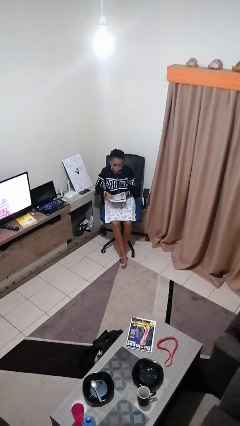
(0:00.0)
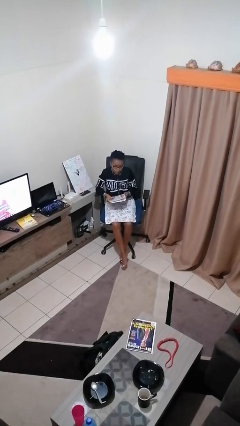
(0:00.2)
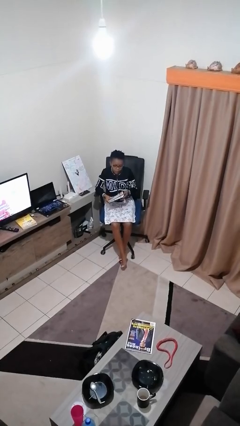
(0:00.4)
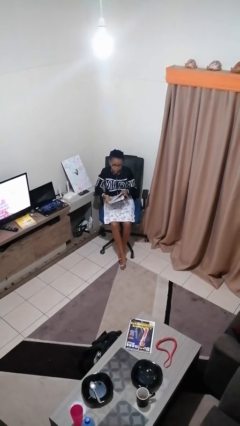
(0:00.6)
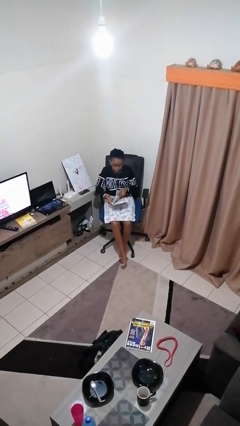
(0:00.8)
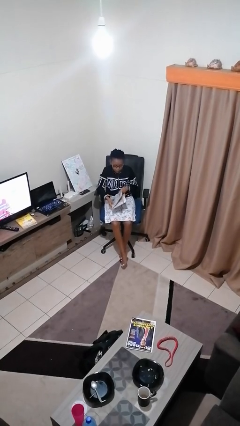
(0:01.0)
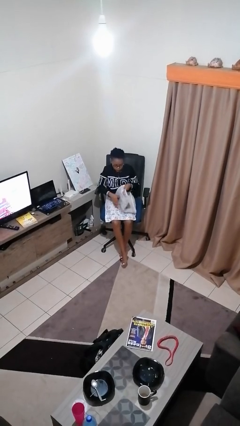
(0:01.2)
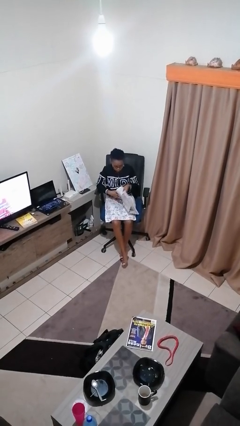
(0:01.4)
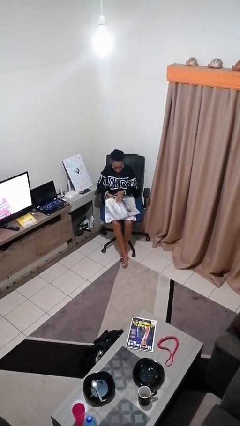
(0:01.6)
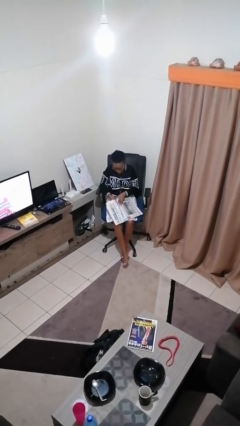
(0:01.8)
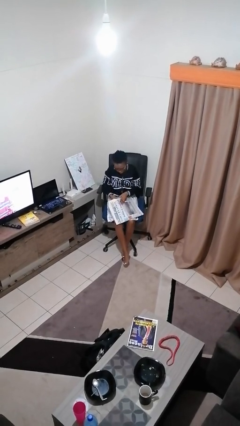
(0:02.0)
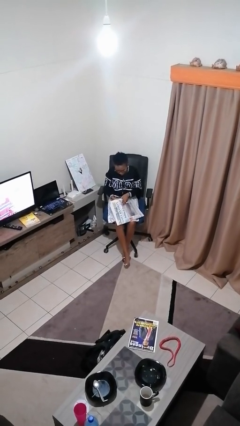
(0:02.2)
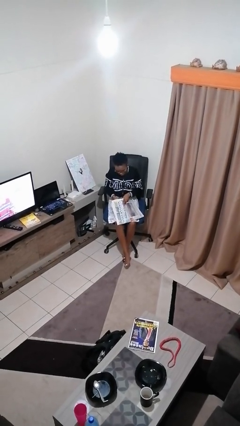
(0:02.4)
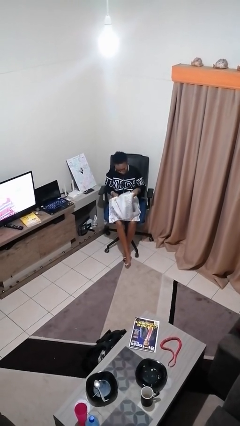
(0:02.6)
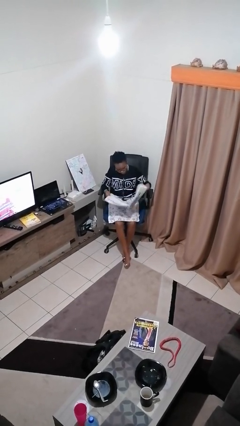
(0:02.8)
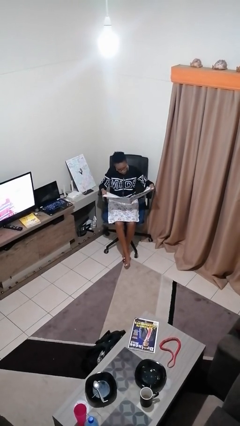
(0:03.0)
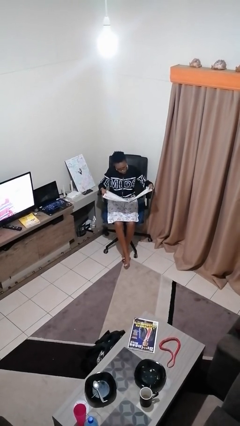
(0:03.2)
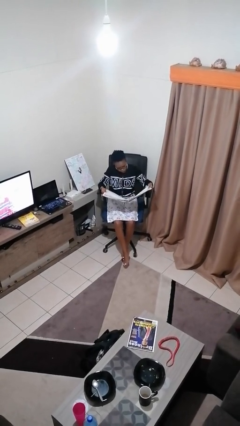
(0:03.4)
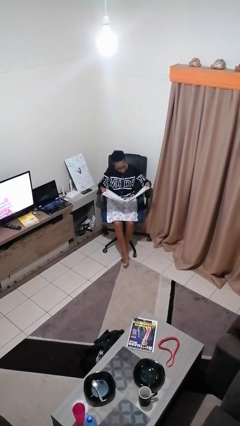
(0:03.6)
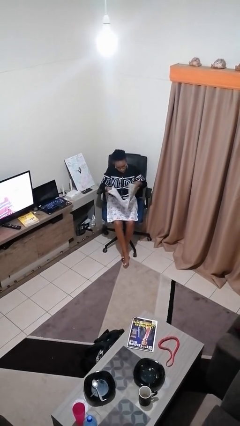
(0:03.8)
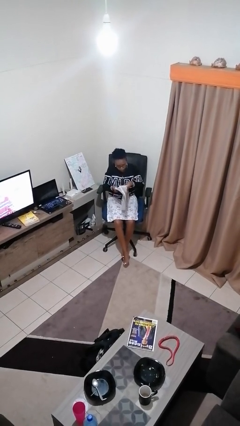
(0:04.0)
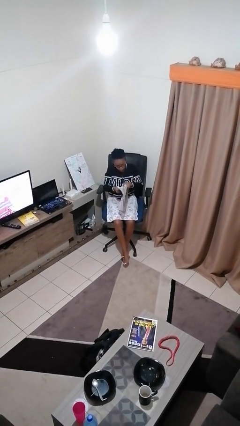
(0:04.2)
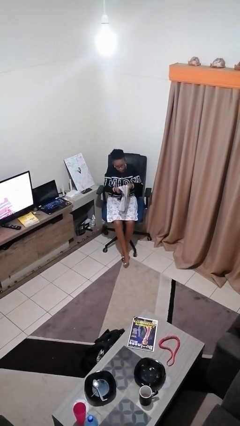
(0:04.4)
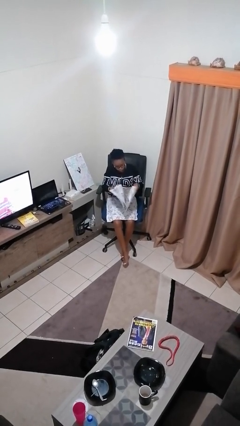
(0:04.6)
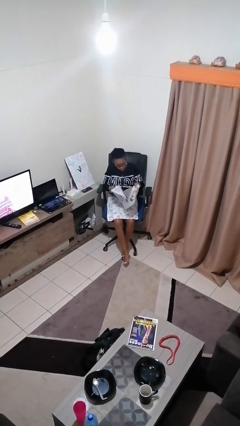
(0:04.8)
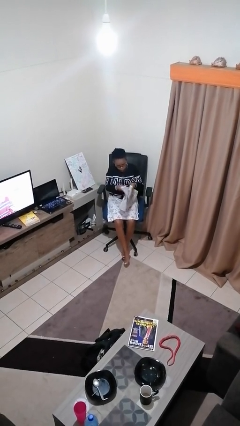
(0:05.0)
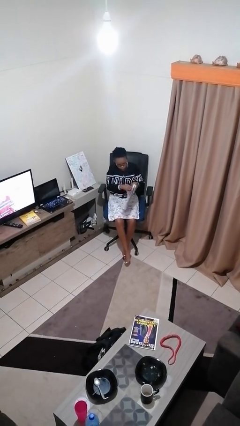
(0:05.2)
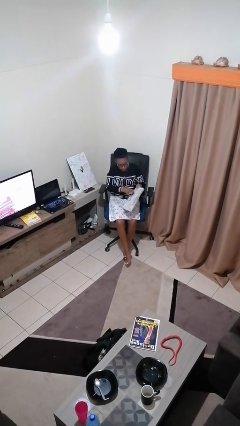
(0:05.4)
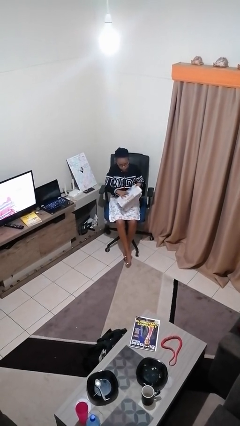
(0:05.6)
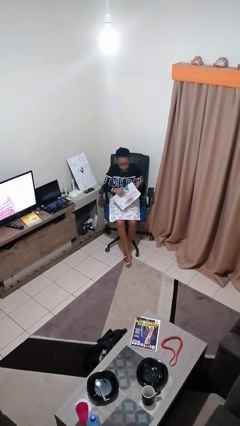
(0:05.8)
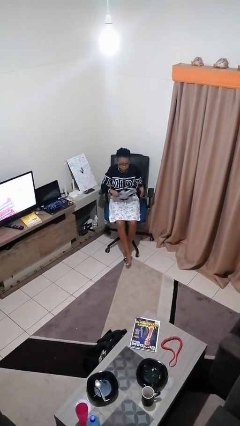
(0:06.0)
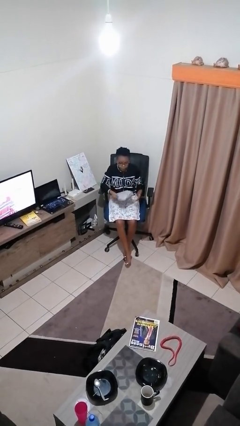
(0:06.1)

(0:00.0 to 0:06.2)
person reads newspaper

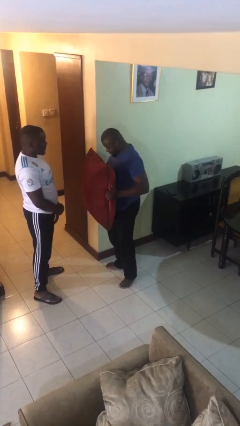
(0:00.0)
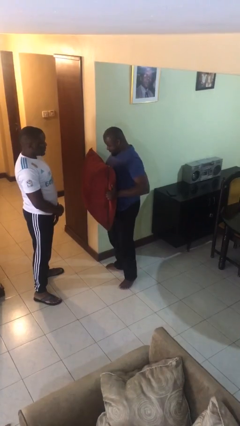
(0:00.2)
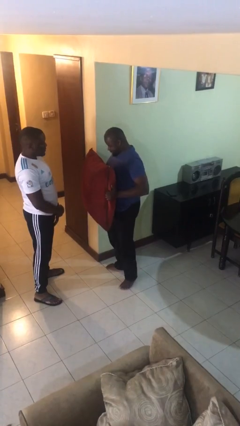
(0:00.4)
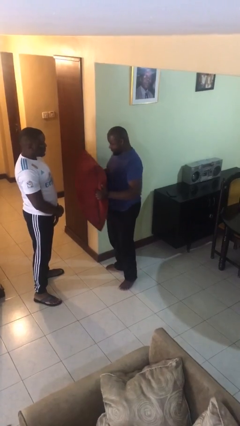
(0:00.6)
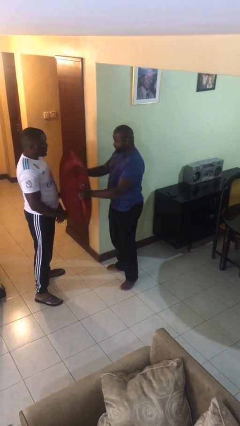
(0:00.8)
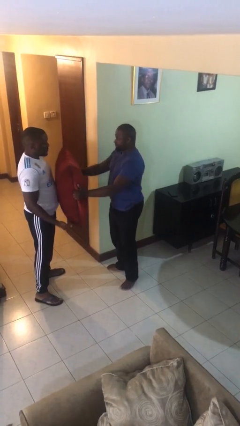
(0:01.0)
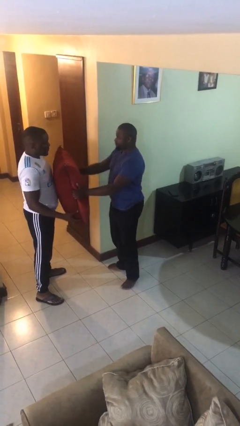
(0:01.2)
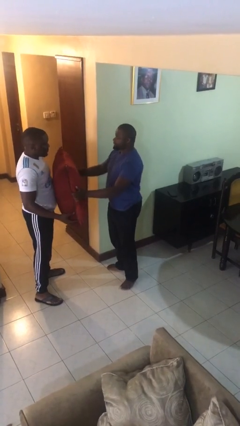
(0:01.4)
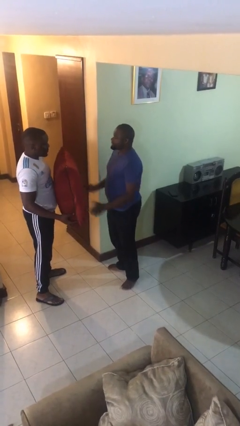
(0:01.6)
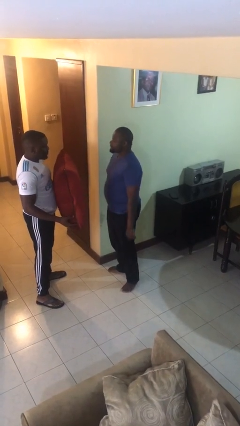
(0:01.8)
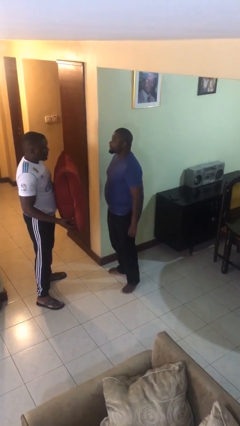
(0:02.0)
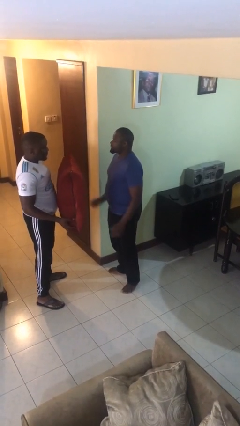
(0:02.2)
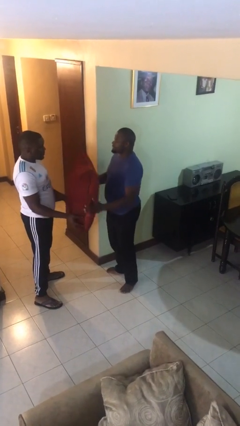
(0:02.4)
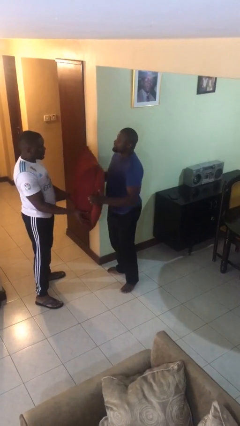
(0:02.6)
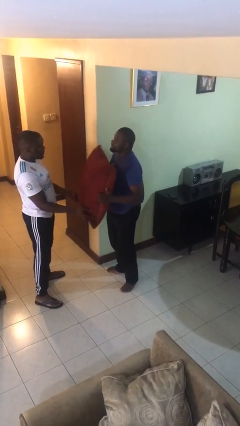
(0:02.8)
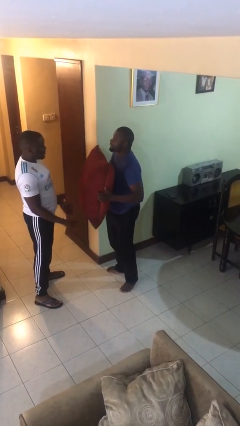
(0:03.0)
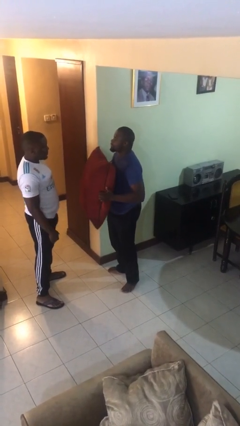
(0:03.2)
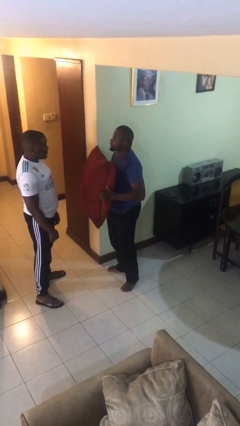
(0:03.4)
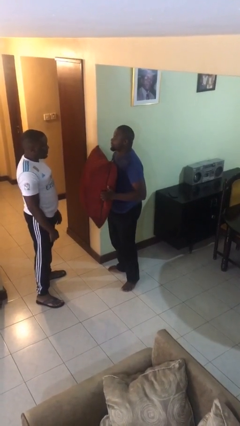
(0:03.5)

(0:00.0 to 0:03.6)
person transfers object to person

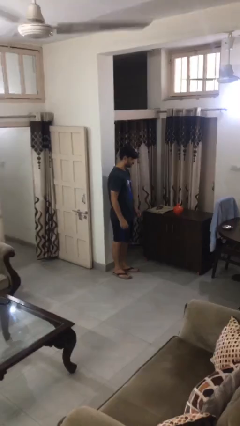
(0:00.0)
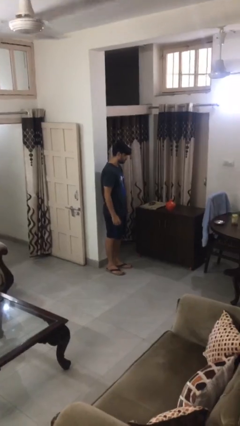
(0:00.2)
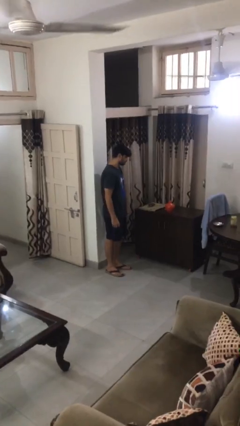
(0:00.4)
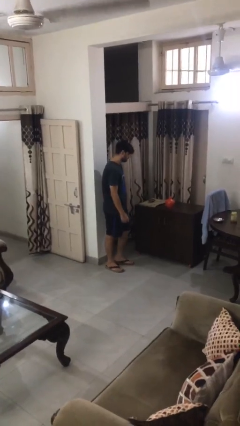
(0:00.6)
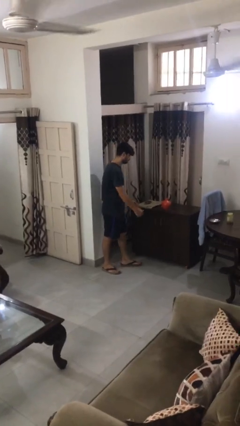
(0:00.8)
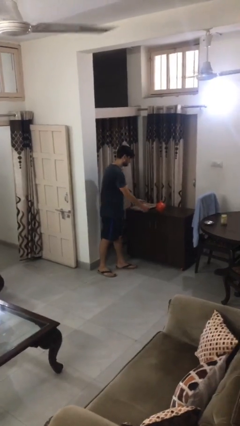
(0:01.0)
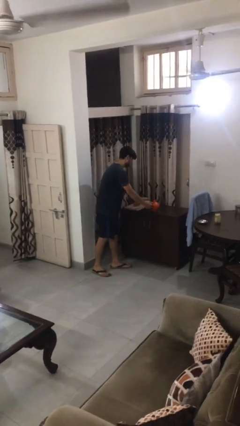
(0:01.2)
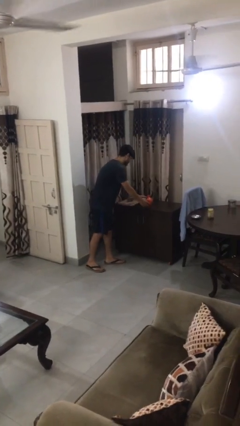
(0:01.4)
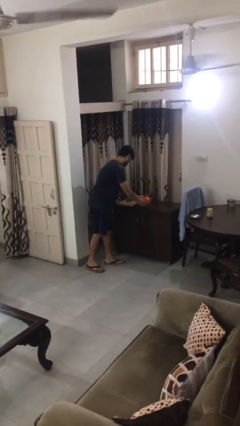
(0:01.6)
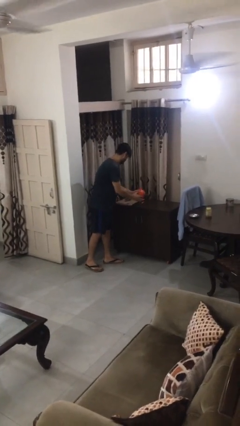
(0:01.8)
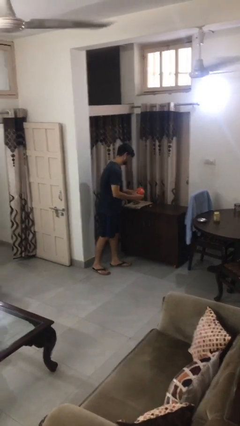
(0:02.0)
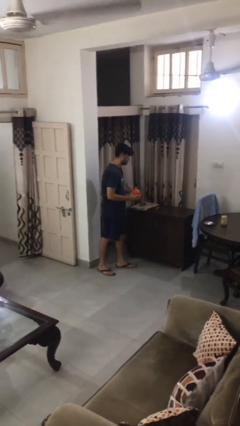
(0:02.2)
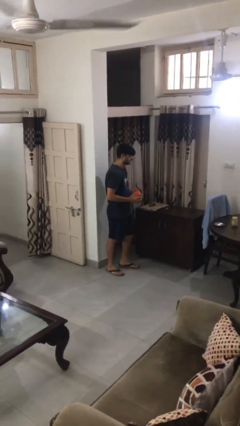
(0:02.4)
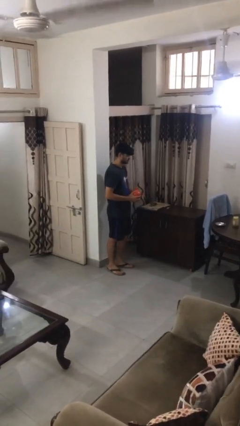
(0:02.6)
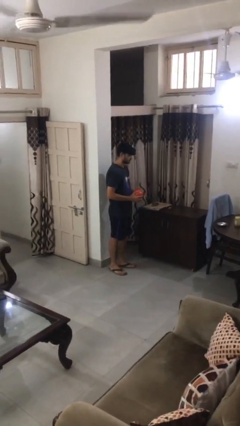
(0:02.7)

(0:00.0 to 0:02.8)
person picks up object from countertop

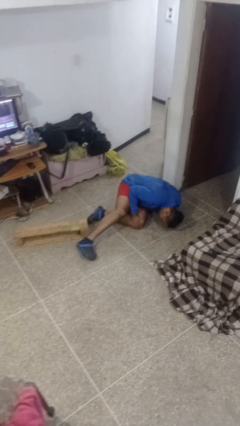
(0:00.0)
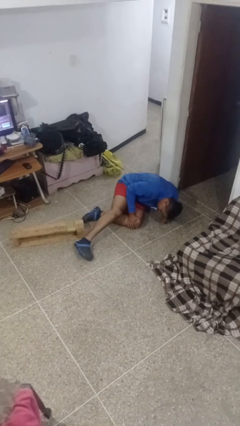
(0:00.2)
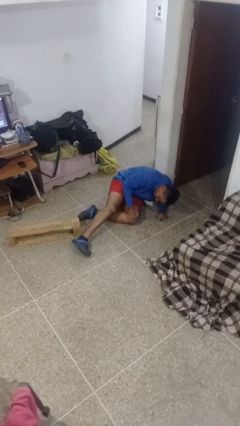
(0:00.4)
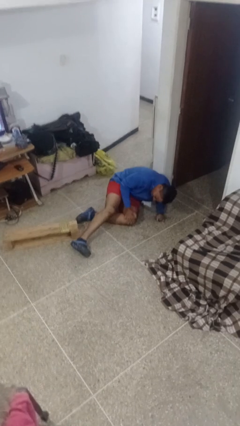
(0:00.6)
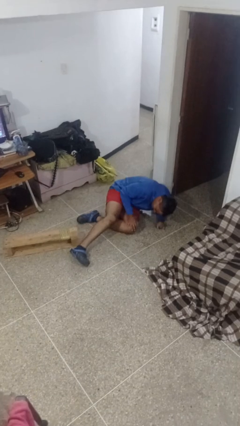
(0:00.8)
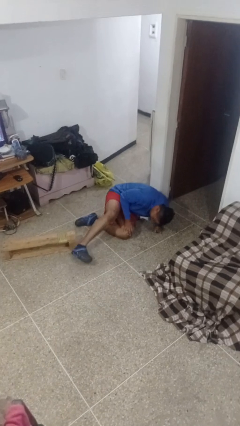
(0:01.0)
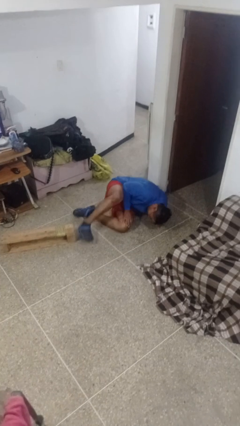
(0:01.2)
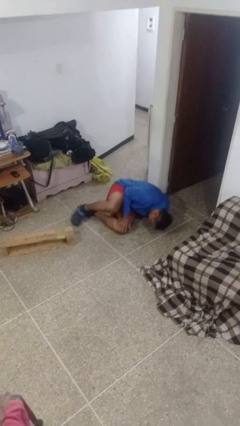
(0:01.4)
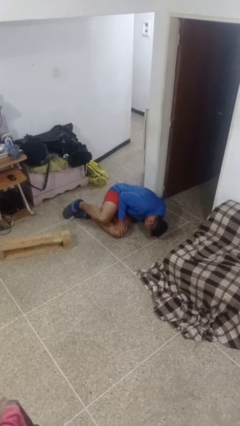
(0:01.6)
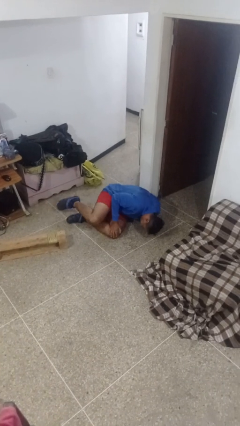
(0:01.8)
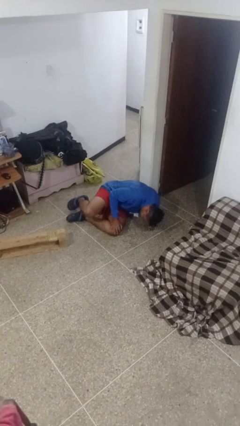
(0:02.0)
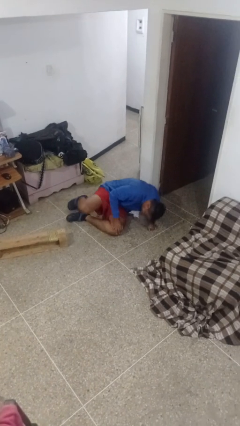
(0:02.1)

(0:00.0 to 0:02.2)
person lies down on floor

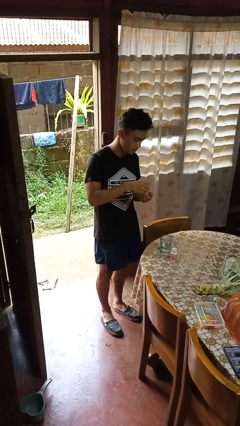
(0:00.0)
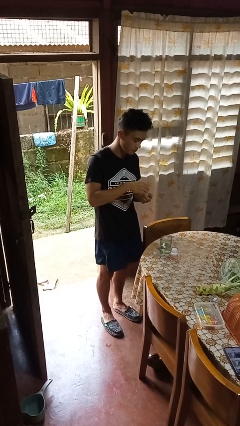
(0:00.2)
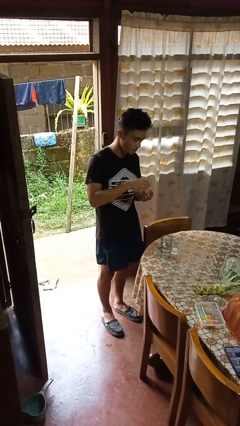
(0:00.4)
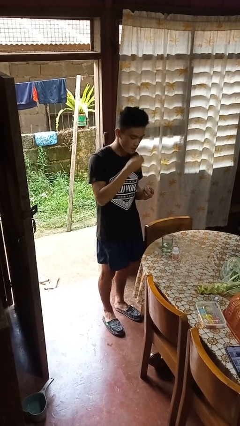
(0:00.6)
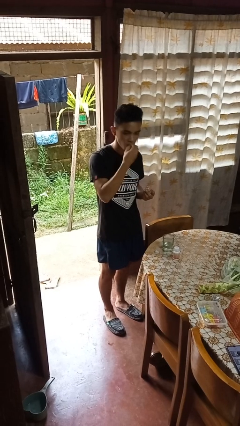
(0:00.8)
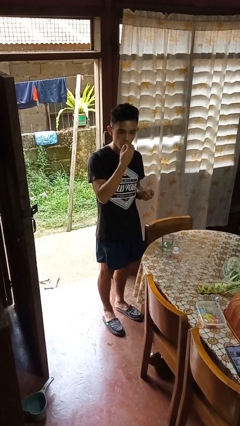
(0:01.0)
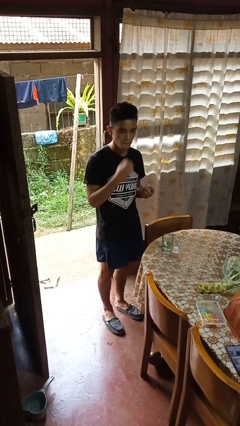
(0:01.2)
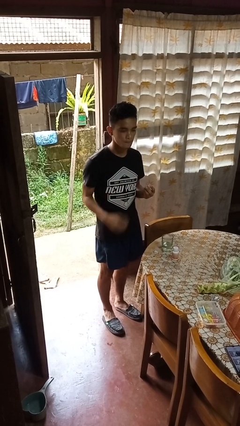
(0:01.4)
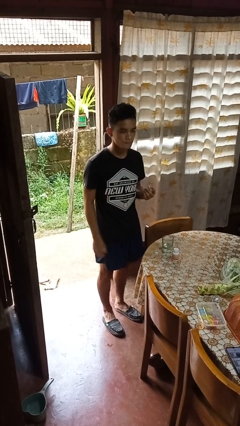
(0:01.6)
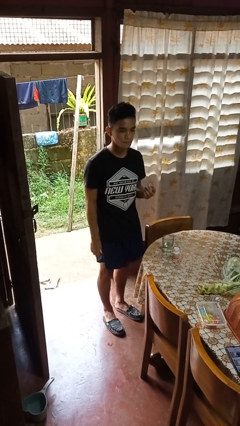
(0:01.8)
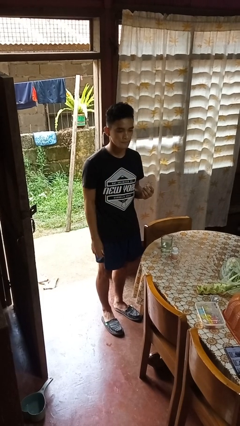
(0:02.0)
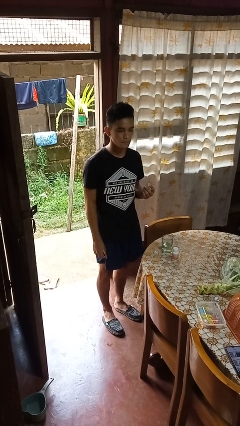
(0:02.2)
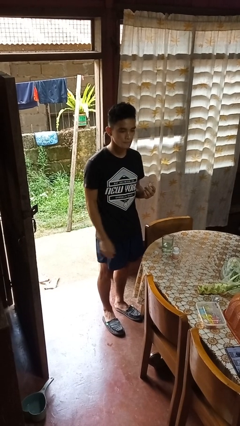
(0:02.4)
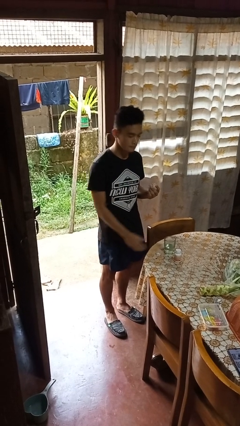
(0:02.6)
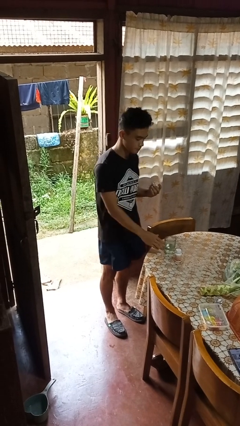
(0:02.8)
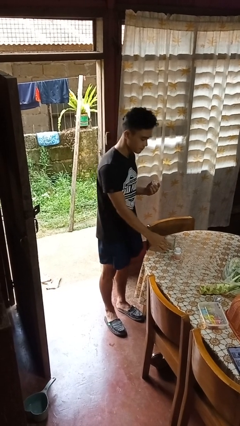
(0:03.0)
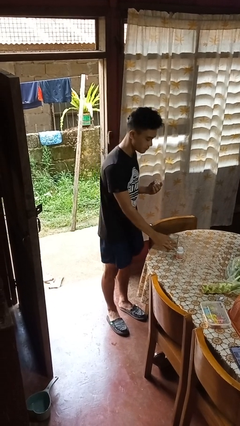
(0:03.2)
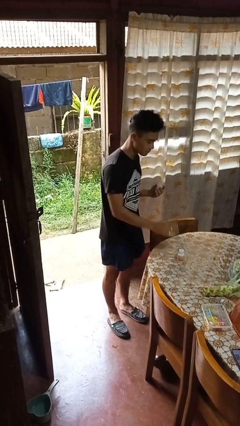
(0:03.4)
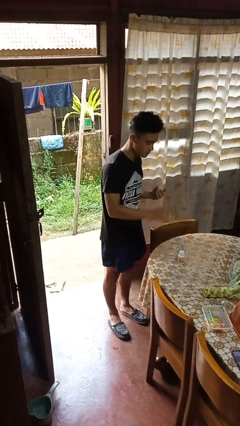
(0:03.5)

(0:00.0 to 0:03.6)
person takes medicine pills
